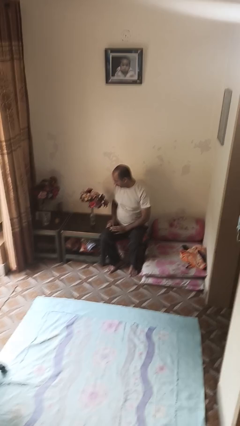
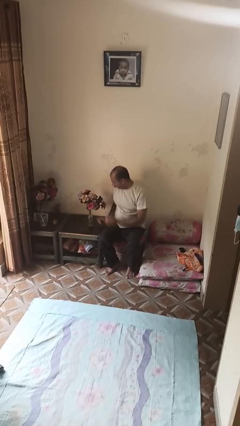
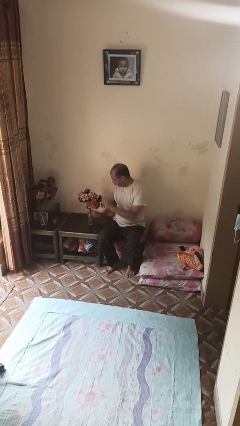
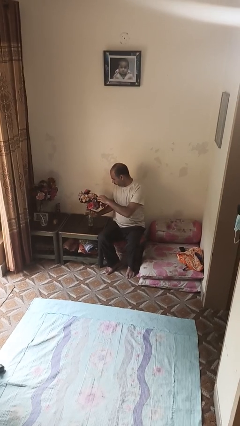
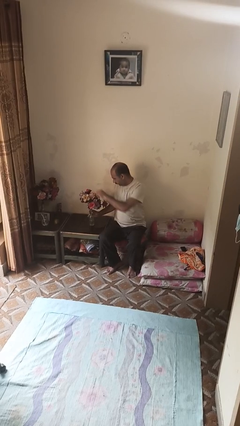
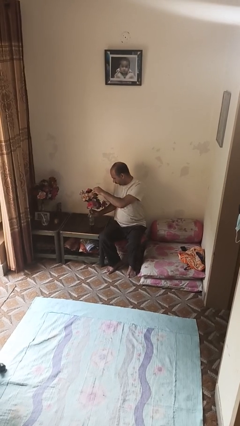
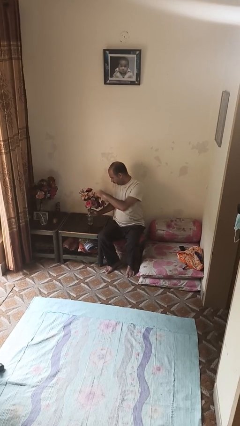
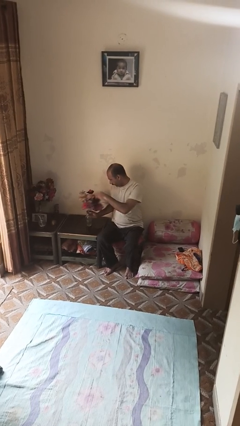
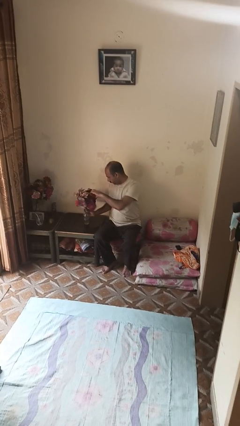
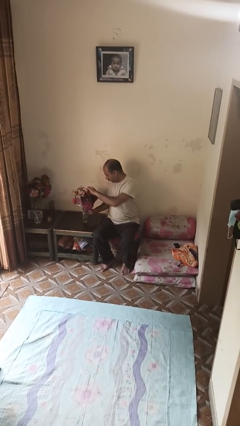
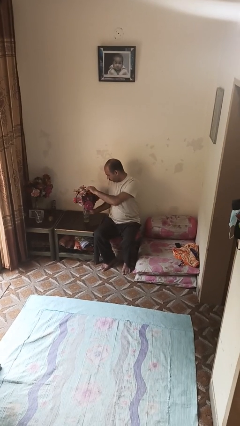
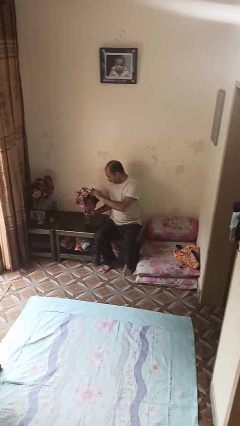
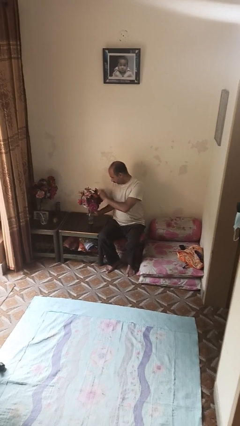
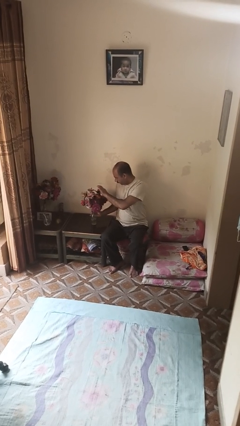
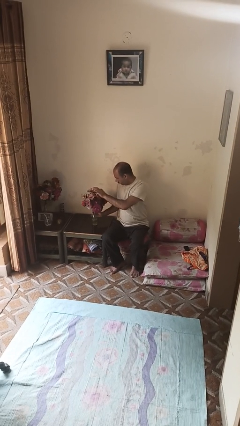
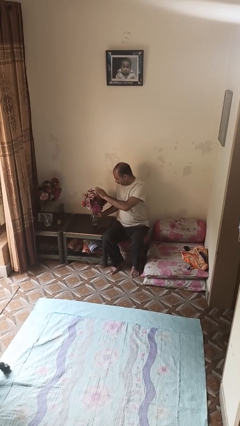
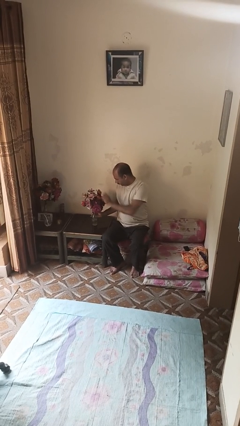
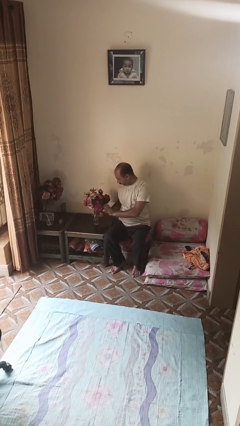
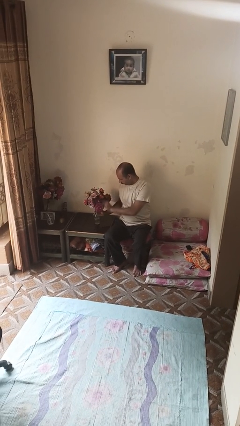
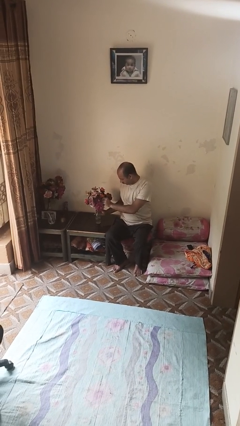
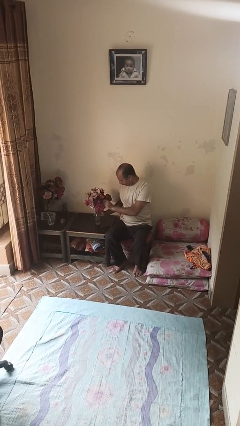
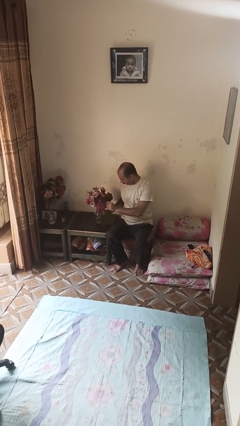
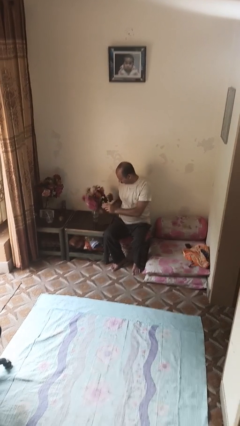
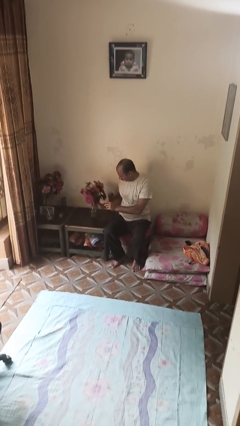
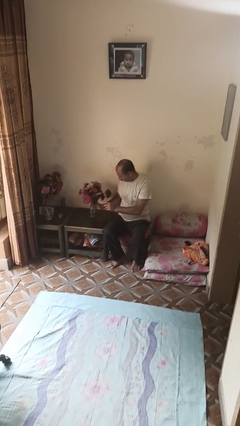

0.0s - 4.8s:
person arranges flowers in vase

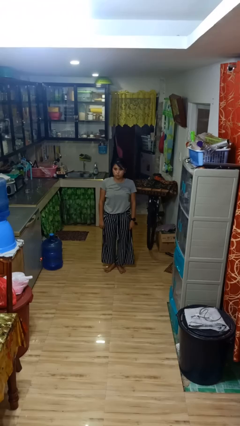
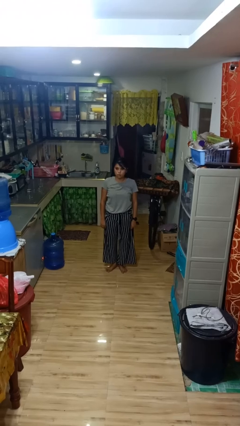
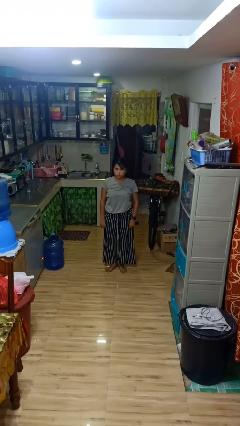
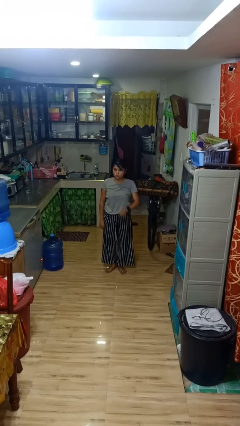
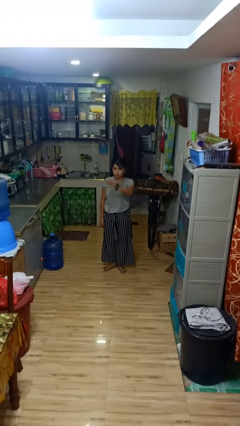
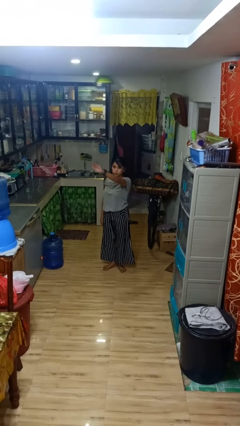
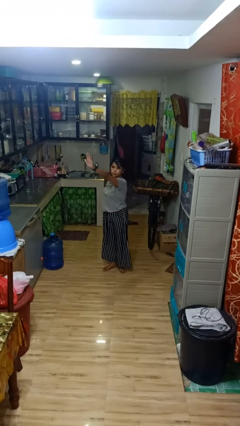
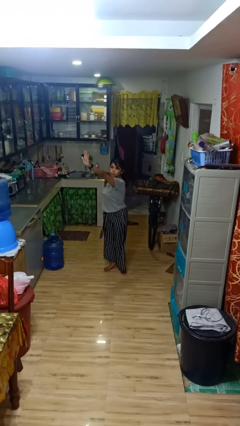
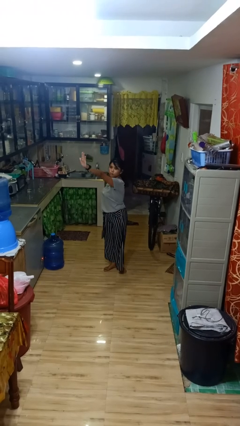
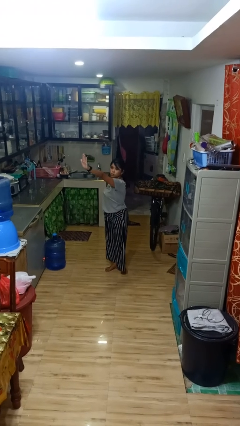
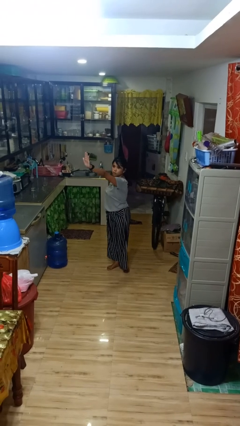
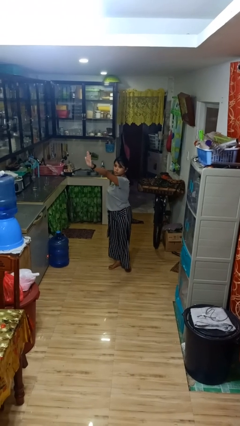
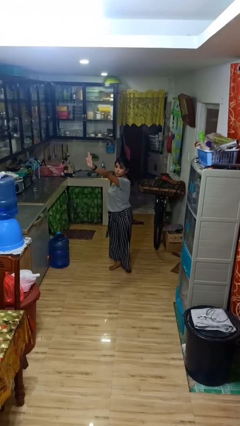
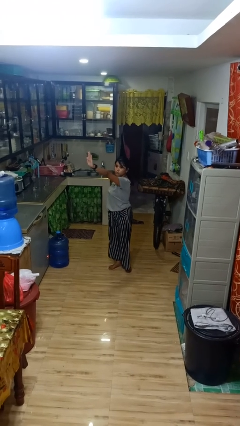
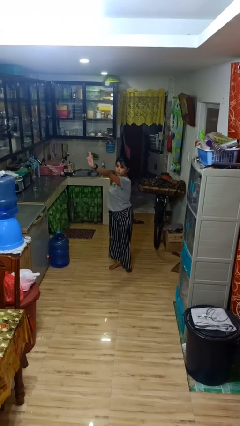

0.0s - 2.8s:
person gestures stop

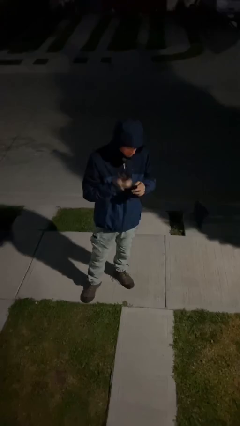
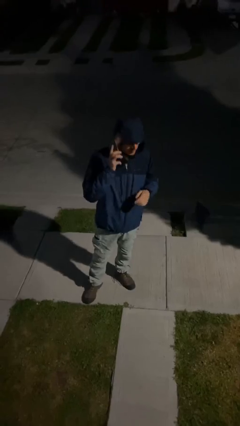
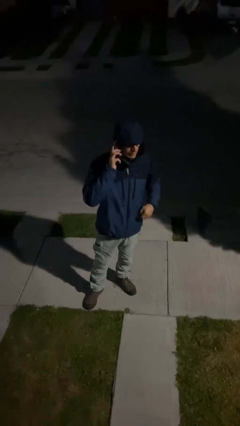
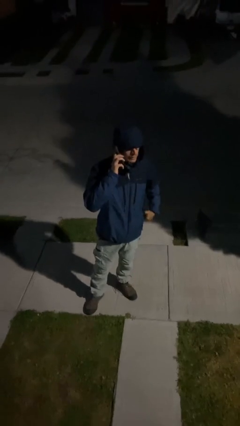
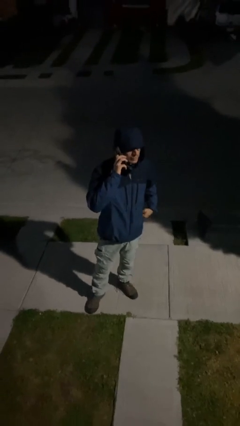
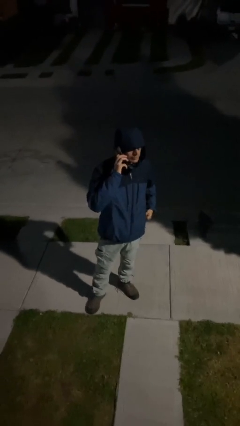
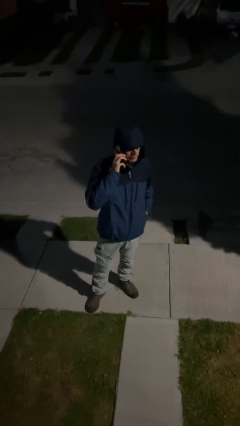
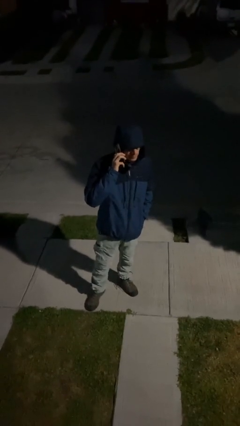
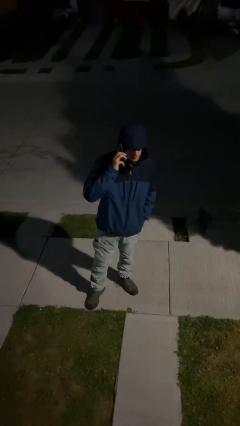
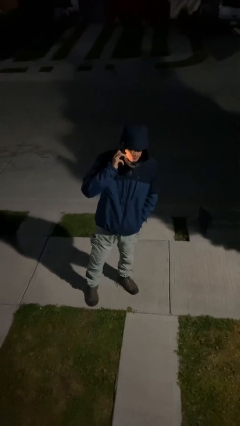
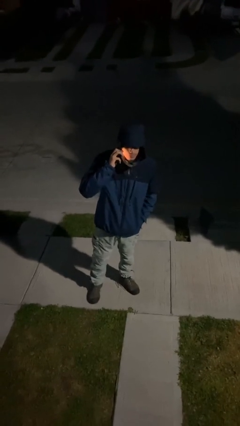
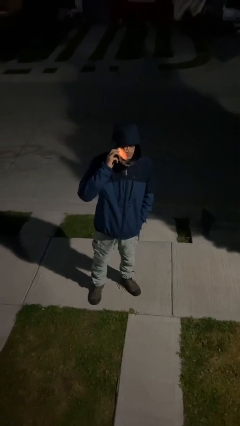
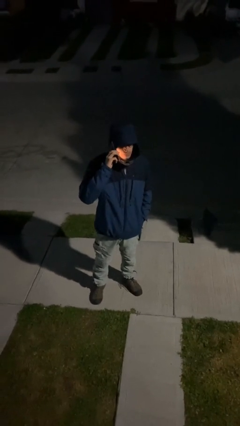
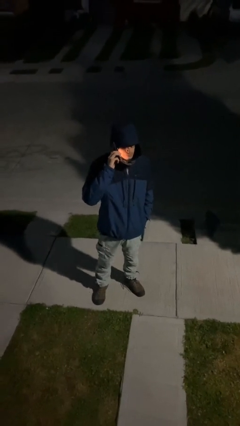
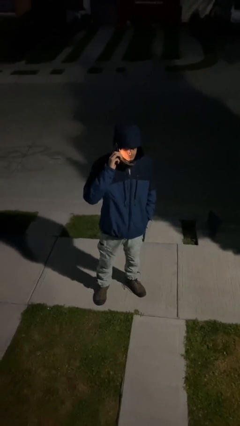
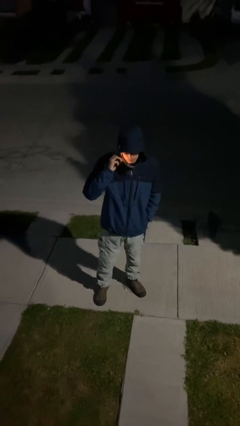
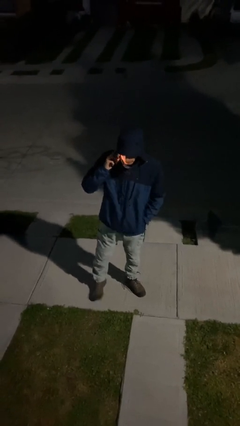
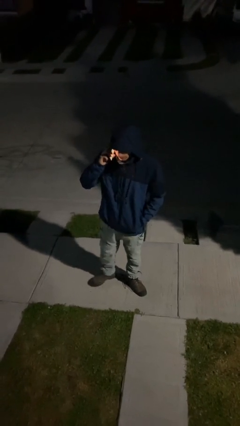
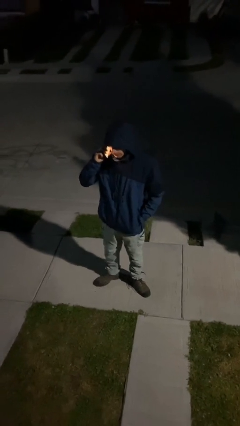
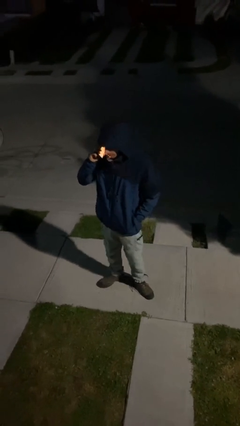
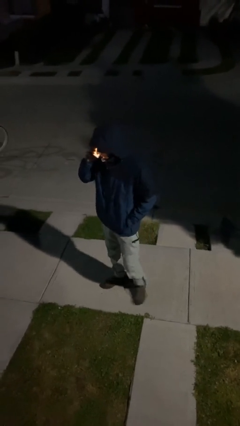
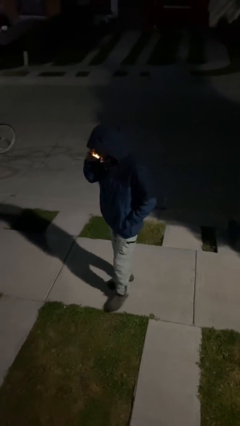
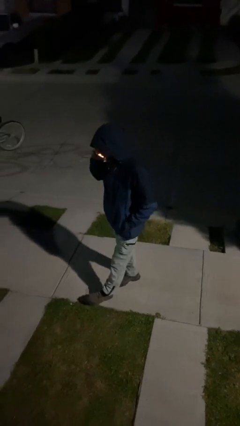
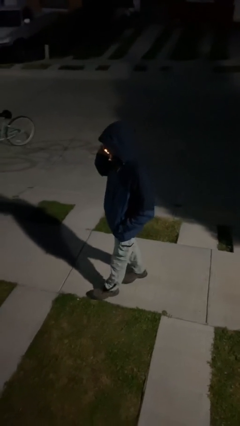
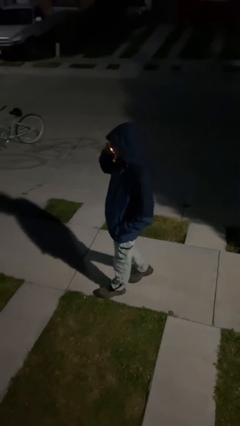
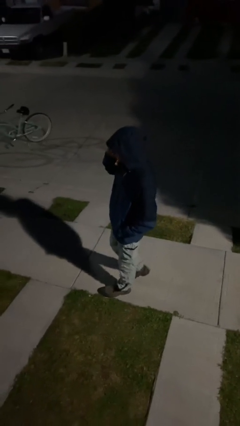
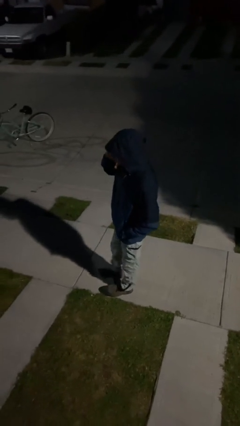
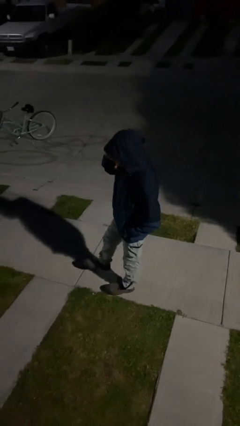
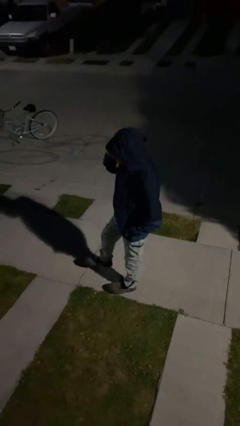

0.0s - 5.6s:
person talks on phone

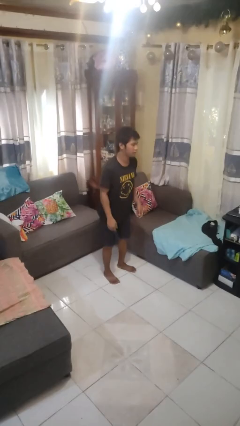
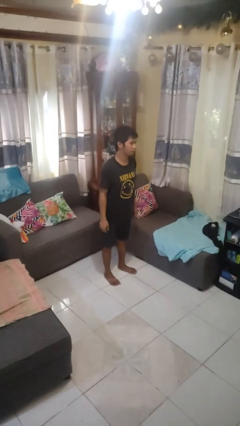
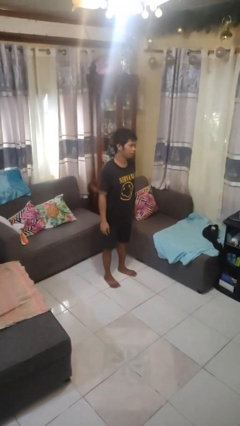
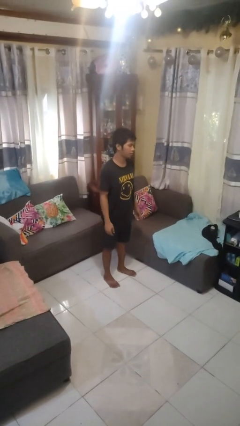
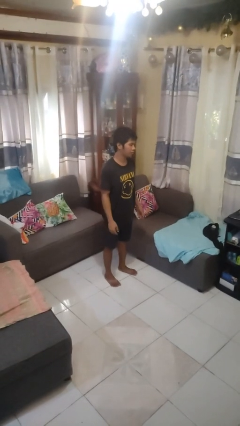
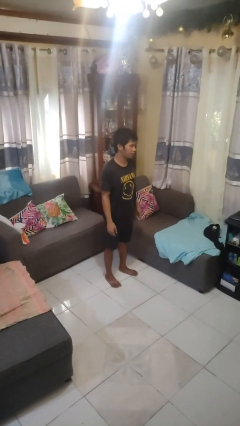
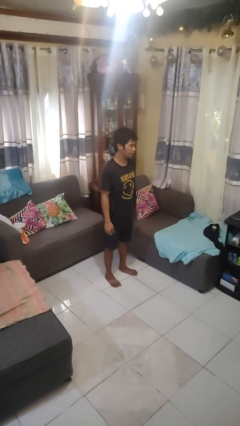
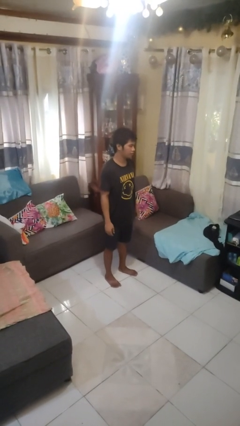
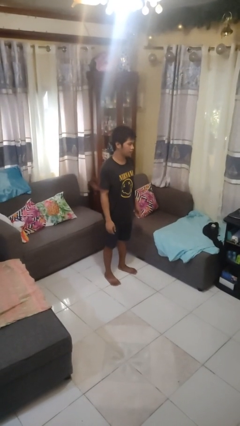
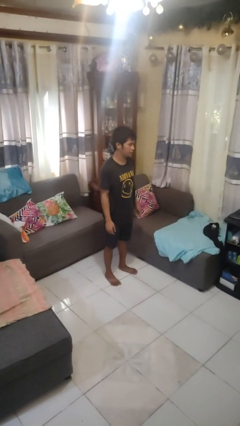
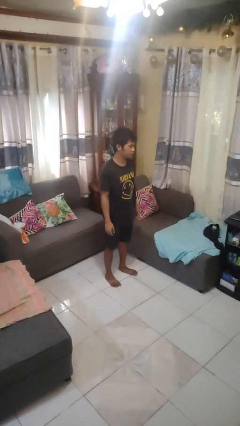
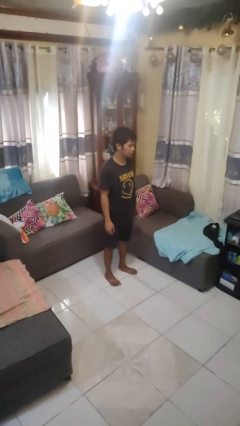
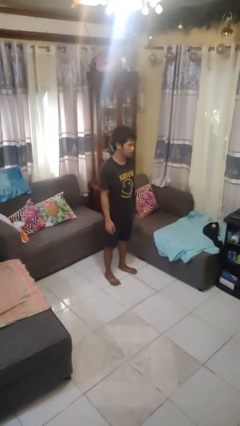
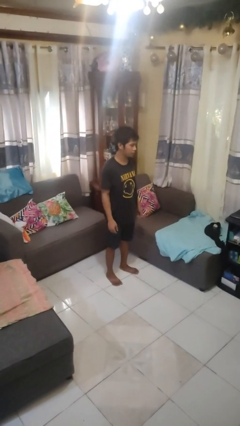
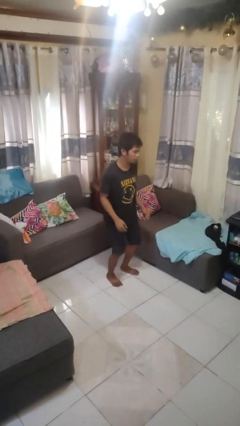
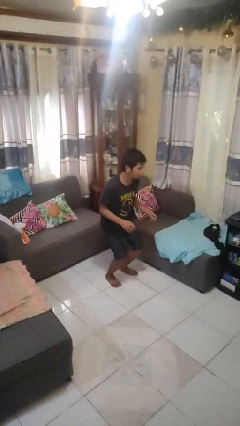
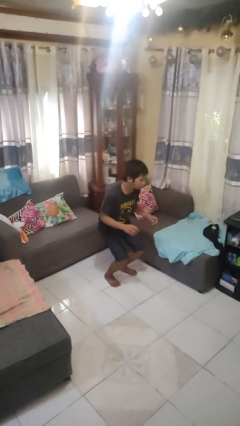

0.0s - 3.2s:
person stands up

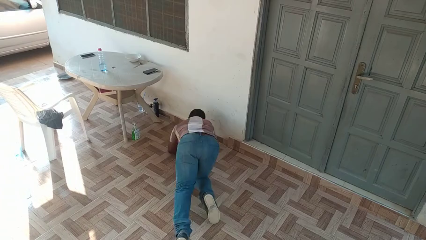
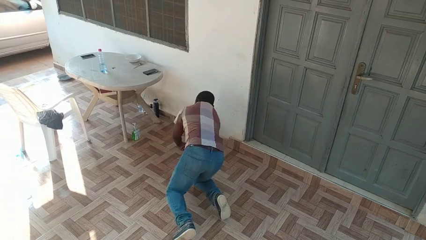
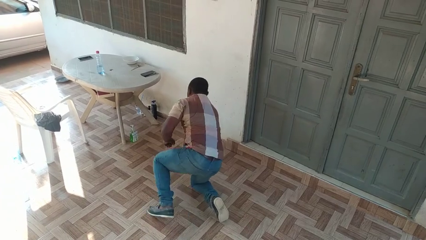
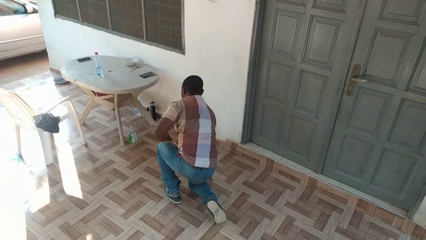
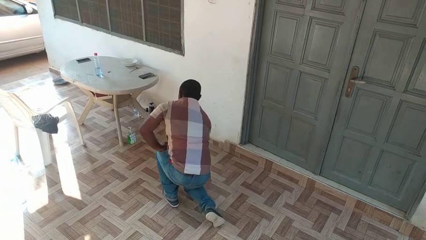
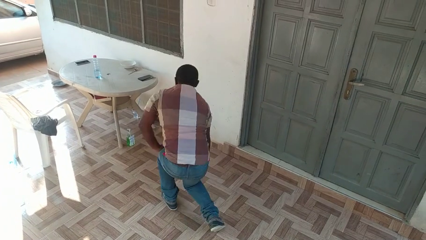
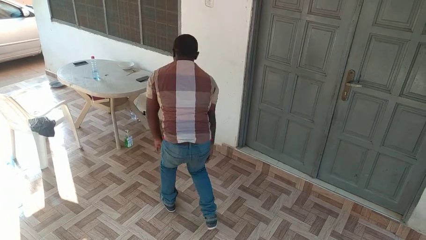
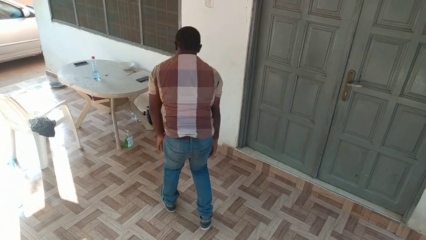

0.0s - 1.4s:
person stands up from floor
